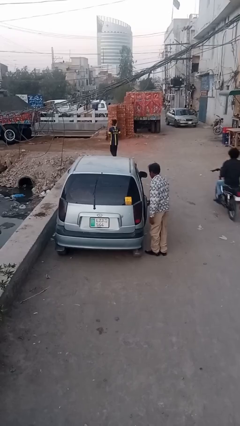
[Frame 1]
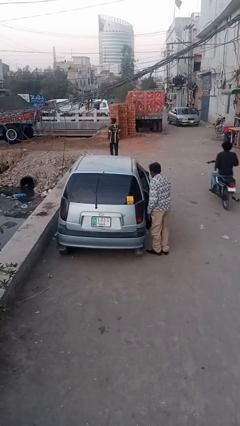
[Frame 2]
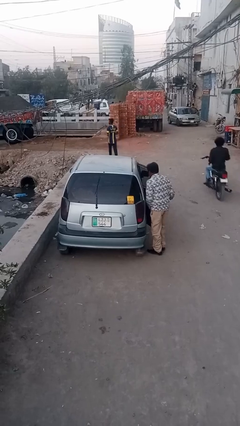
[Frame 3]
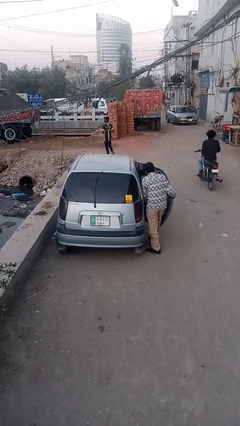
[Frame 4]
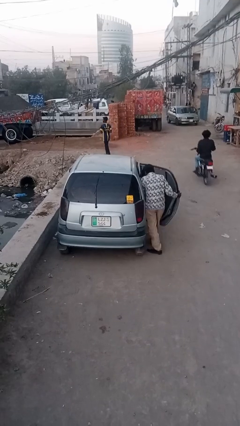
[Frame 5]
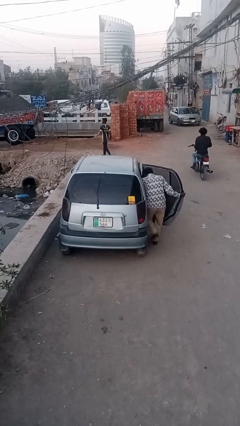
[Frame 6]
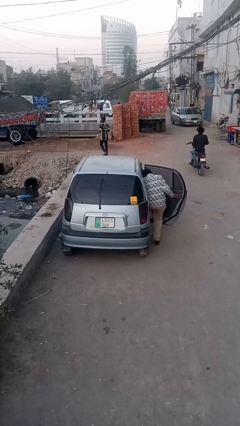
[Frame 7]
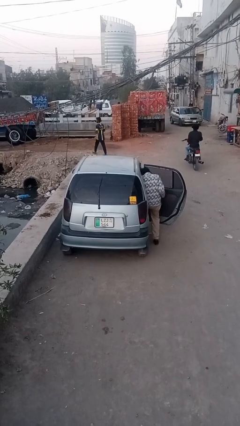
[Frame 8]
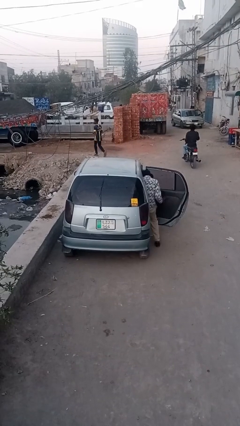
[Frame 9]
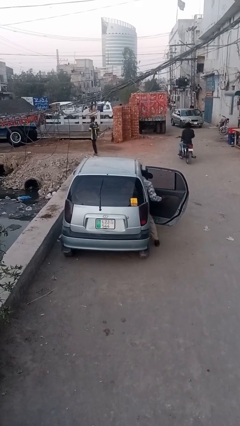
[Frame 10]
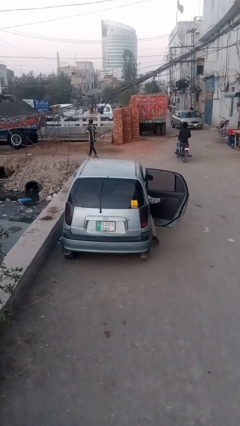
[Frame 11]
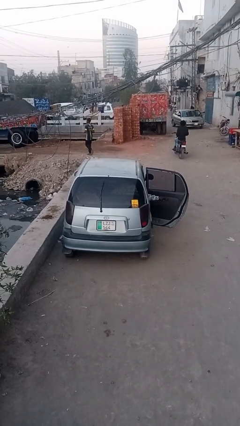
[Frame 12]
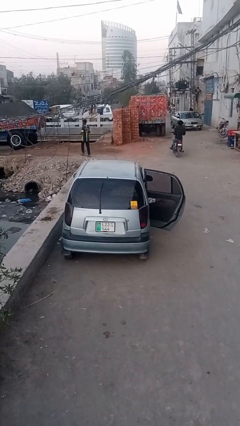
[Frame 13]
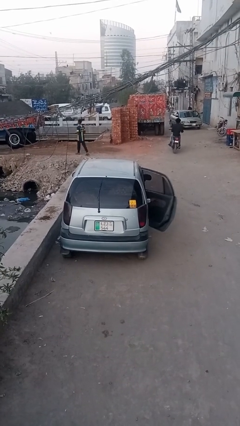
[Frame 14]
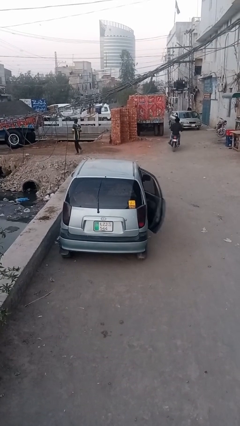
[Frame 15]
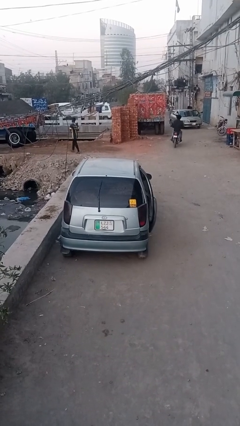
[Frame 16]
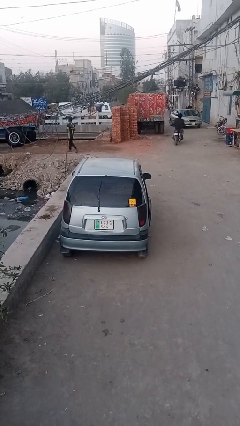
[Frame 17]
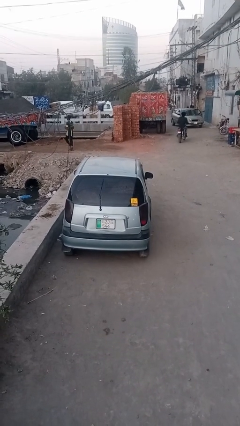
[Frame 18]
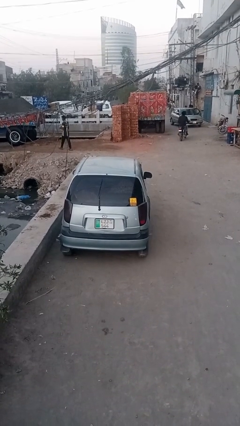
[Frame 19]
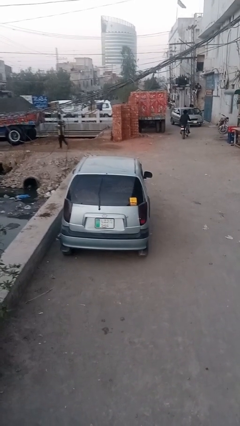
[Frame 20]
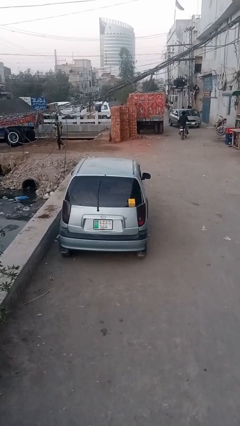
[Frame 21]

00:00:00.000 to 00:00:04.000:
car picks up person

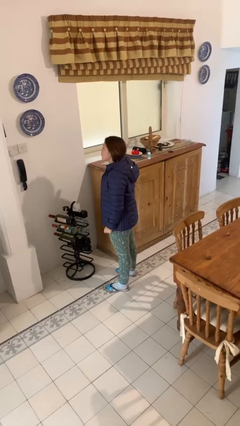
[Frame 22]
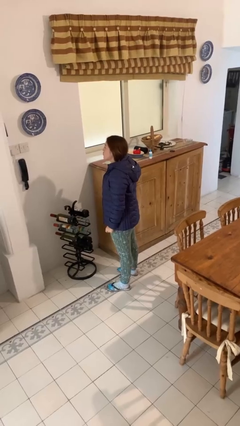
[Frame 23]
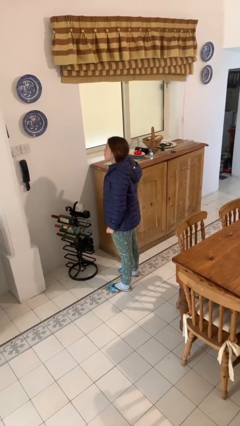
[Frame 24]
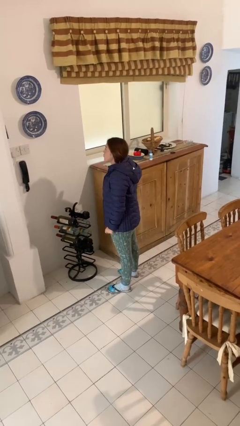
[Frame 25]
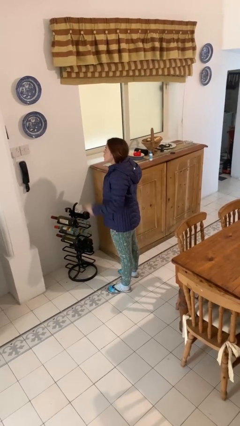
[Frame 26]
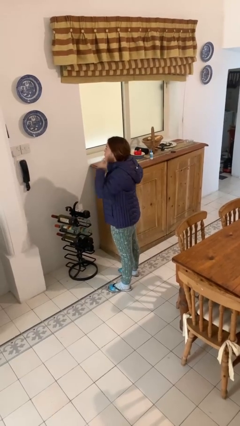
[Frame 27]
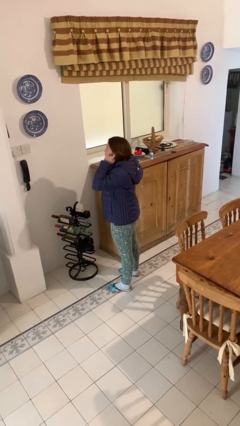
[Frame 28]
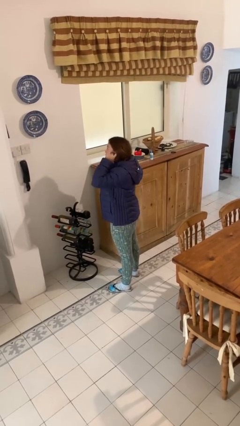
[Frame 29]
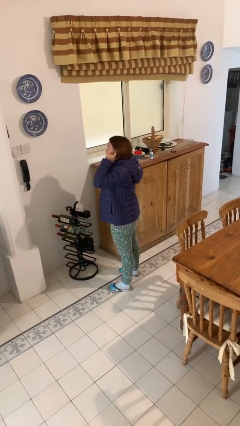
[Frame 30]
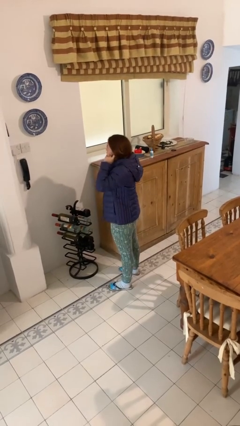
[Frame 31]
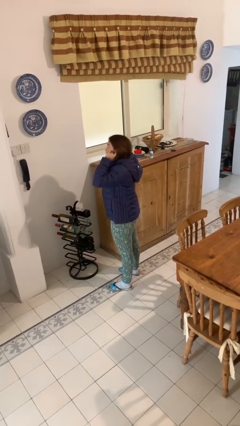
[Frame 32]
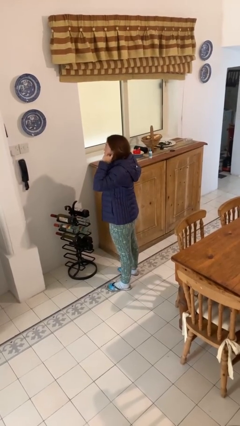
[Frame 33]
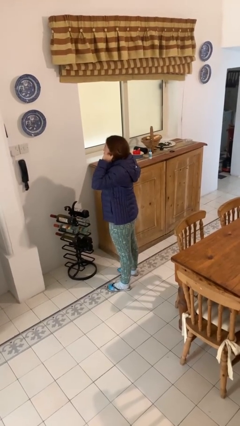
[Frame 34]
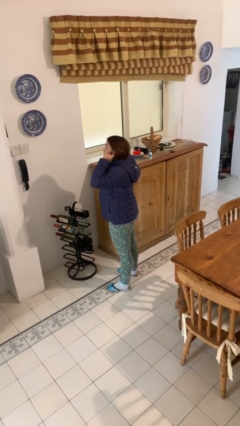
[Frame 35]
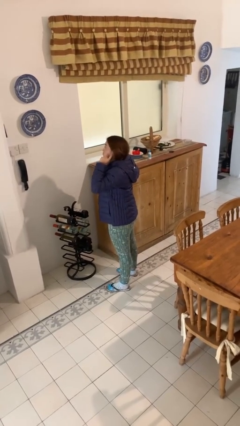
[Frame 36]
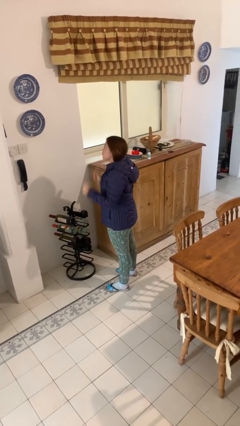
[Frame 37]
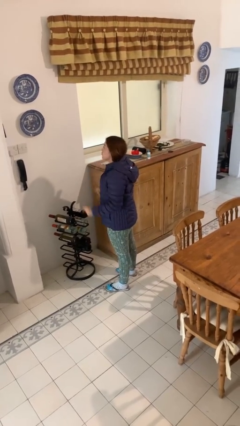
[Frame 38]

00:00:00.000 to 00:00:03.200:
person puts fingers in ear

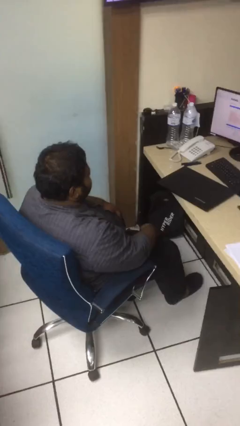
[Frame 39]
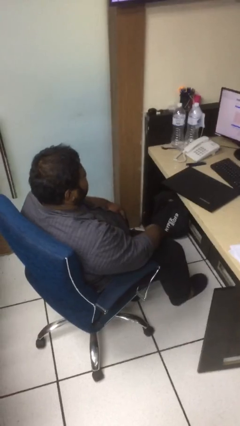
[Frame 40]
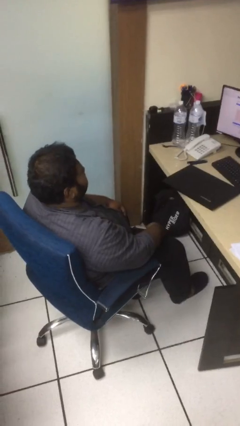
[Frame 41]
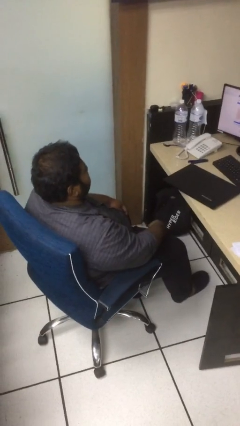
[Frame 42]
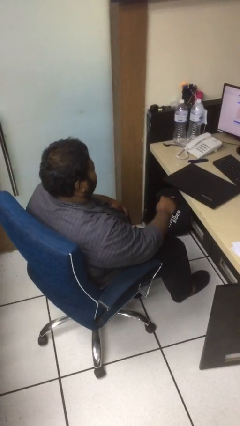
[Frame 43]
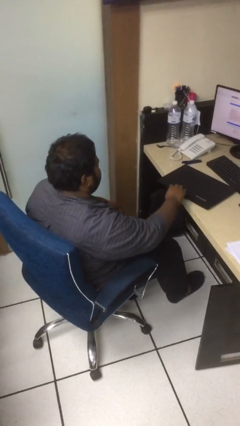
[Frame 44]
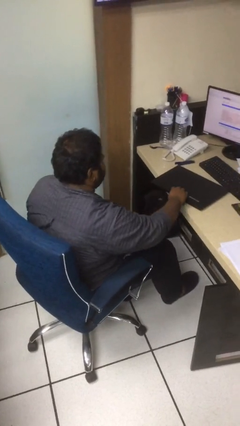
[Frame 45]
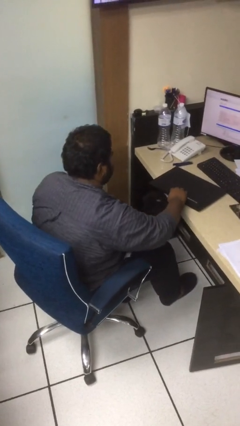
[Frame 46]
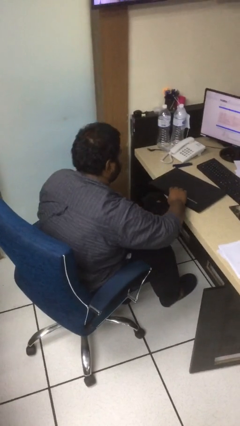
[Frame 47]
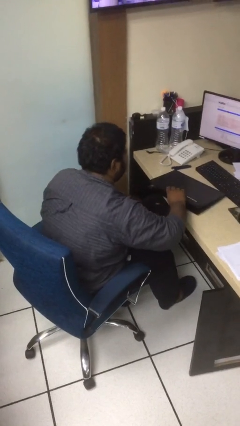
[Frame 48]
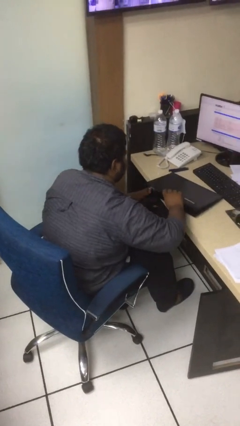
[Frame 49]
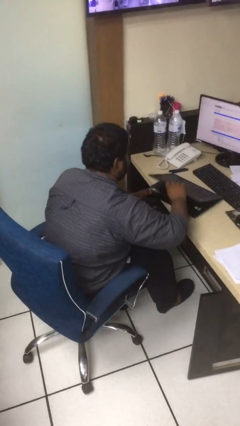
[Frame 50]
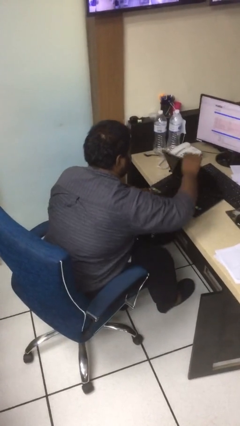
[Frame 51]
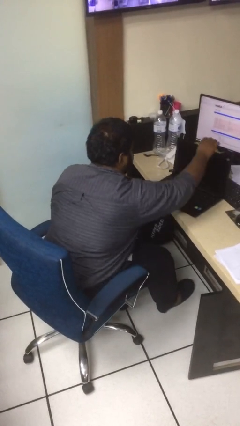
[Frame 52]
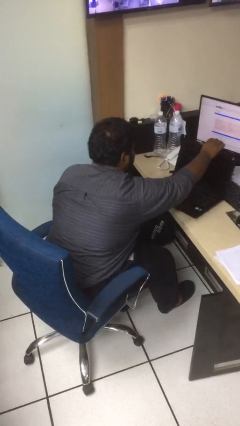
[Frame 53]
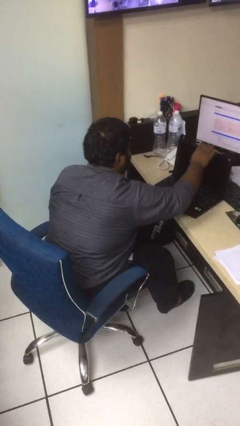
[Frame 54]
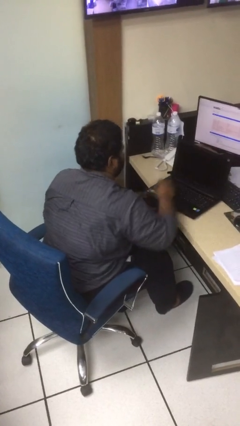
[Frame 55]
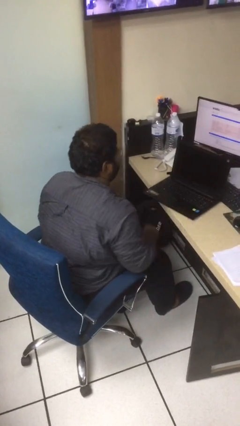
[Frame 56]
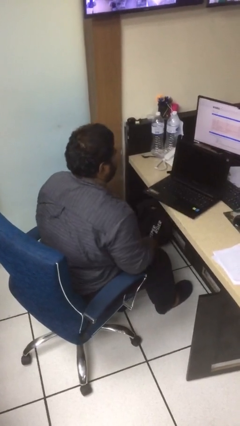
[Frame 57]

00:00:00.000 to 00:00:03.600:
person opens laptop

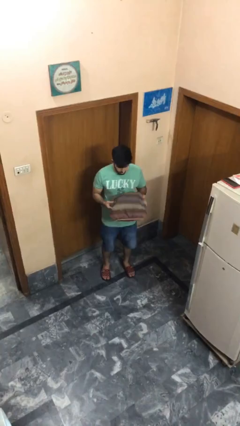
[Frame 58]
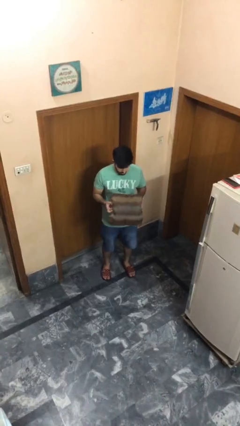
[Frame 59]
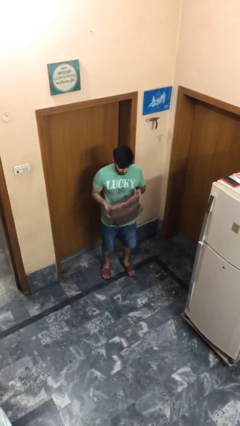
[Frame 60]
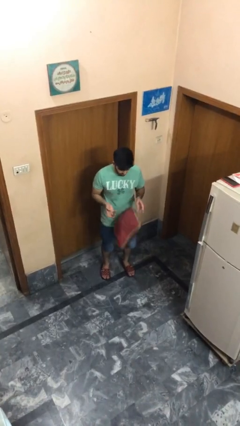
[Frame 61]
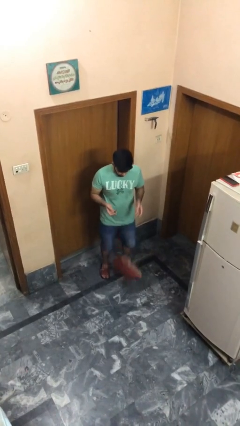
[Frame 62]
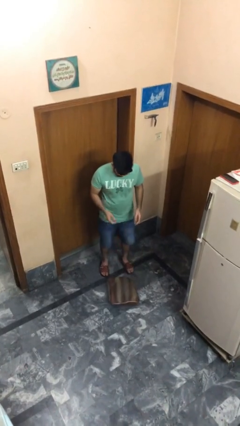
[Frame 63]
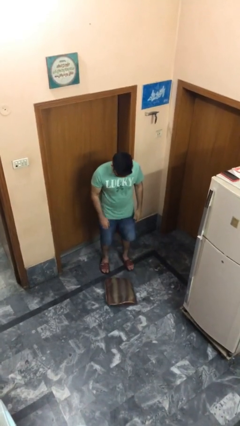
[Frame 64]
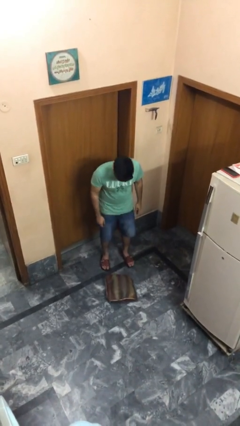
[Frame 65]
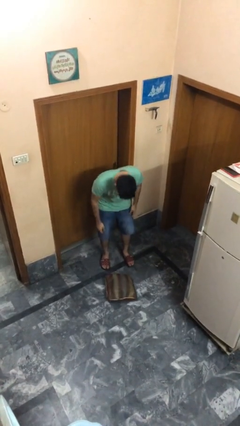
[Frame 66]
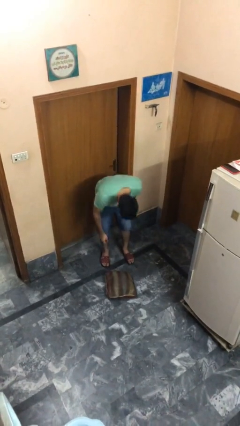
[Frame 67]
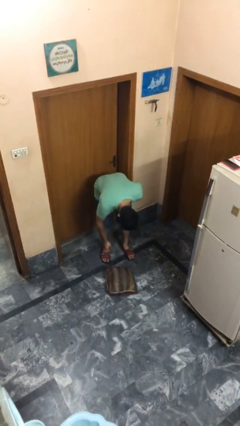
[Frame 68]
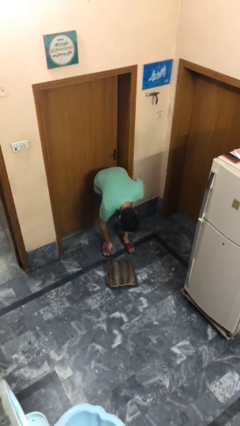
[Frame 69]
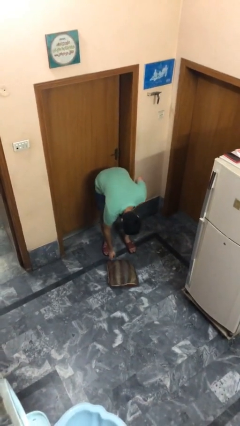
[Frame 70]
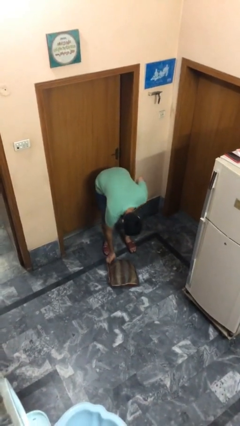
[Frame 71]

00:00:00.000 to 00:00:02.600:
person drops object

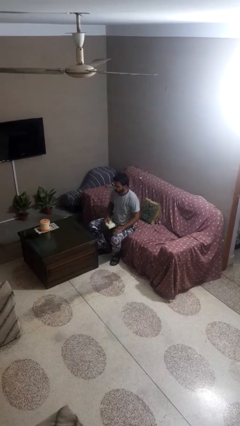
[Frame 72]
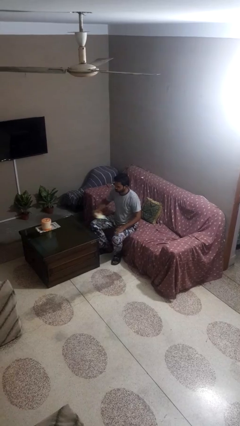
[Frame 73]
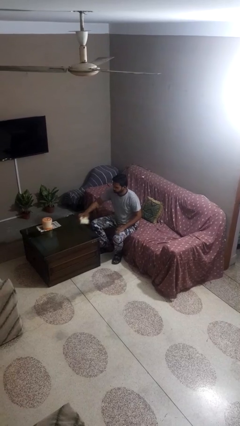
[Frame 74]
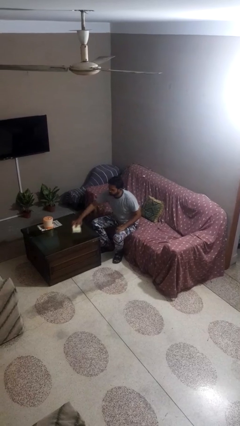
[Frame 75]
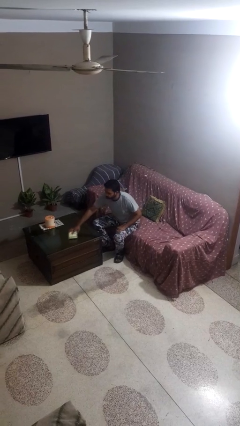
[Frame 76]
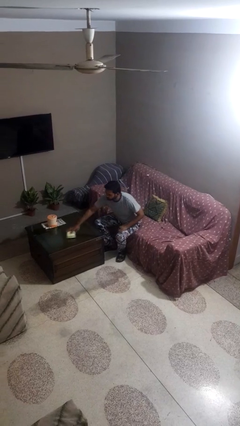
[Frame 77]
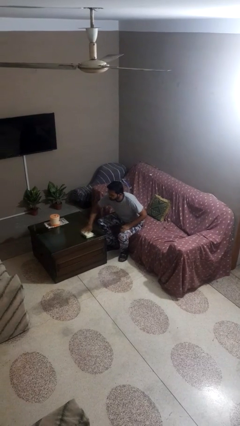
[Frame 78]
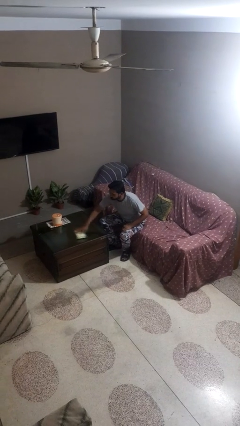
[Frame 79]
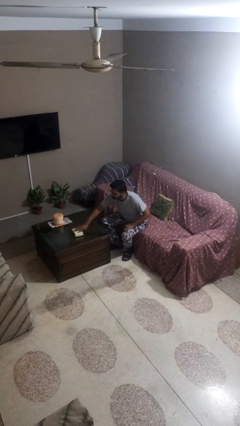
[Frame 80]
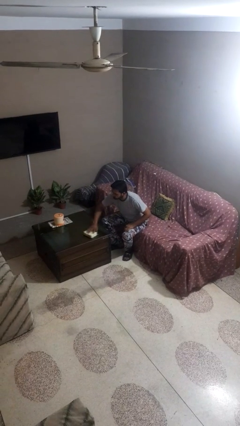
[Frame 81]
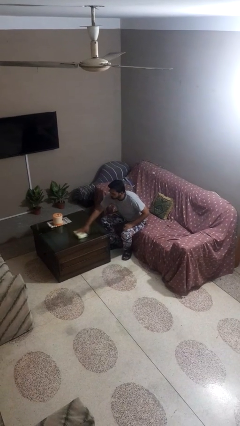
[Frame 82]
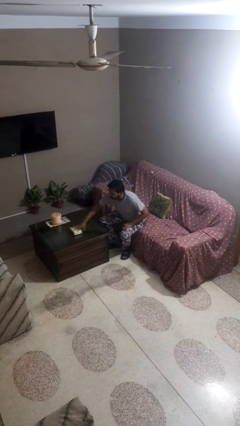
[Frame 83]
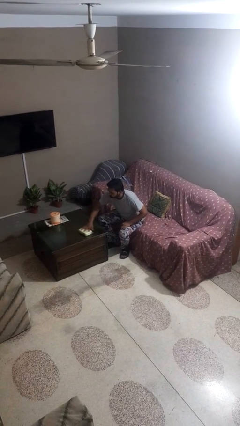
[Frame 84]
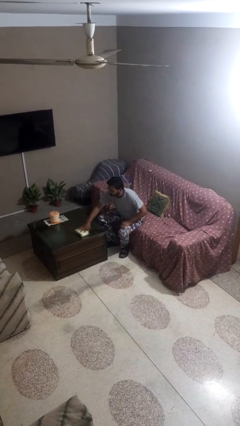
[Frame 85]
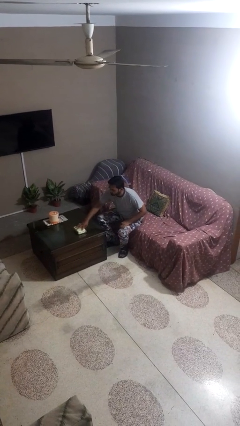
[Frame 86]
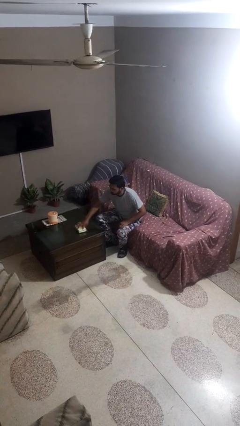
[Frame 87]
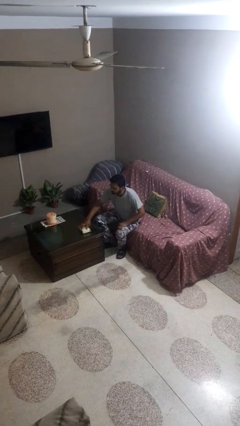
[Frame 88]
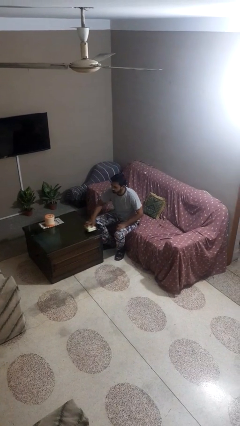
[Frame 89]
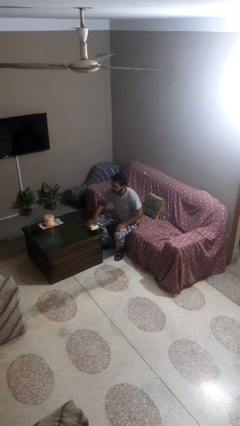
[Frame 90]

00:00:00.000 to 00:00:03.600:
person dusts furniture

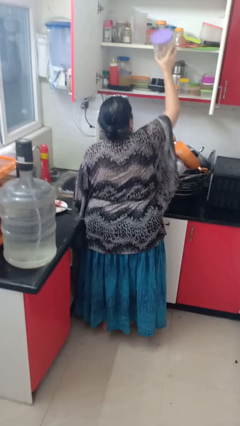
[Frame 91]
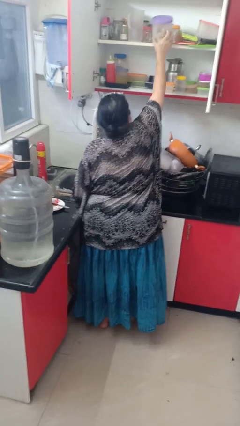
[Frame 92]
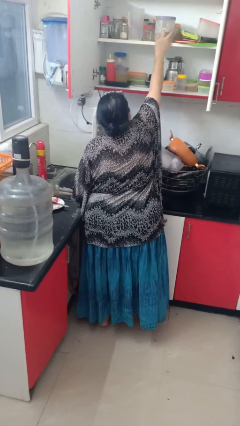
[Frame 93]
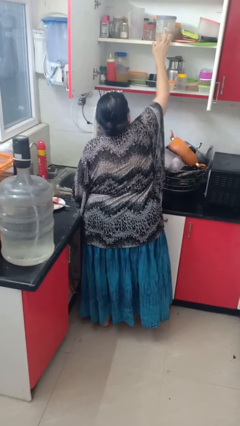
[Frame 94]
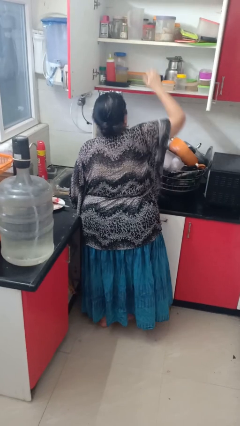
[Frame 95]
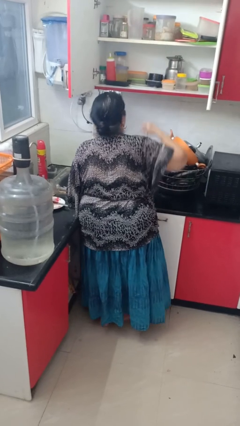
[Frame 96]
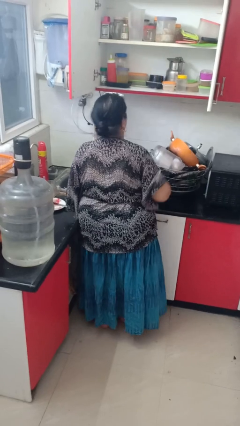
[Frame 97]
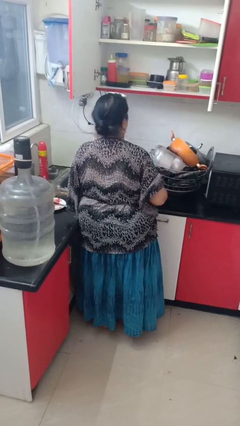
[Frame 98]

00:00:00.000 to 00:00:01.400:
person takes object from cabinet
